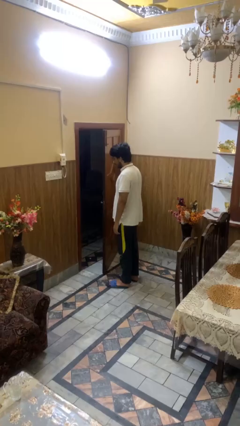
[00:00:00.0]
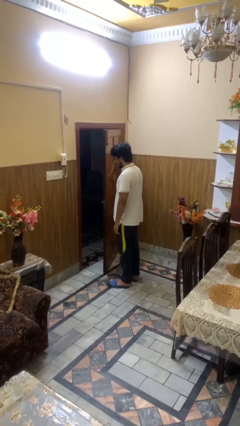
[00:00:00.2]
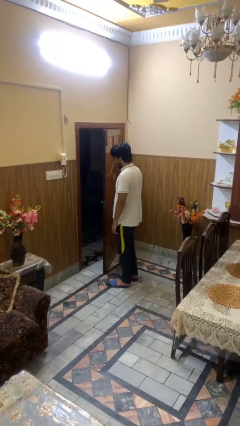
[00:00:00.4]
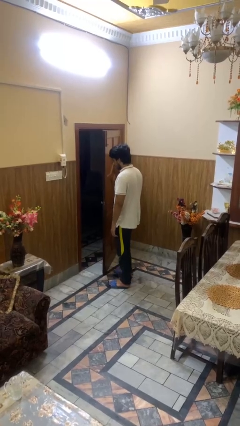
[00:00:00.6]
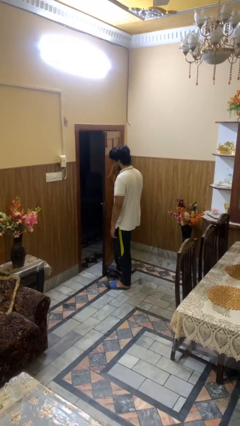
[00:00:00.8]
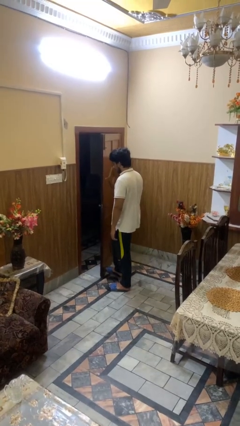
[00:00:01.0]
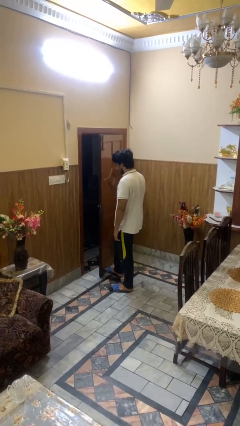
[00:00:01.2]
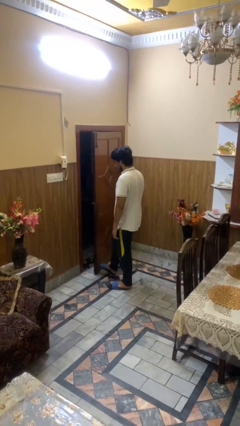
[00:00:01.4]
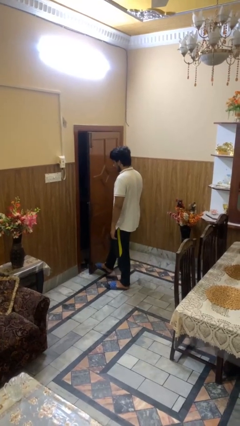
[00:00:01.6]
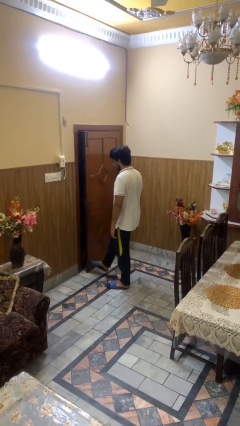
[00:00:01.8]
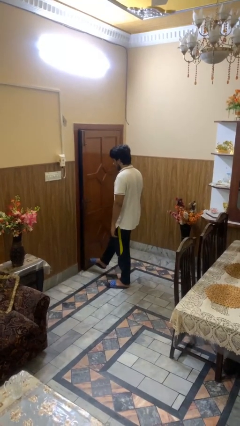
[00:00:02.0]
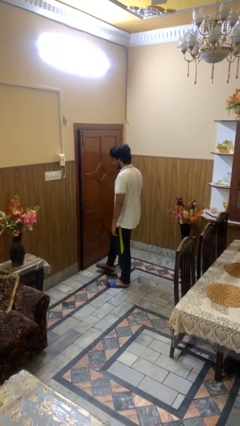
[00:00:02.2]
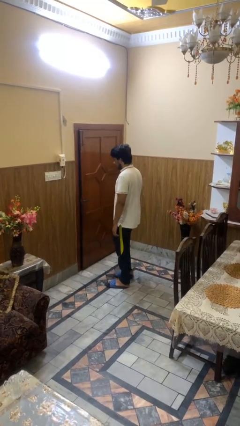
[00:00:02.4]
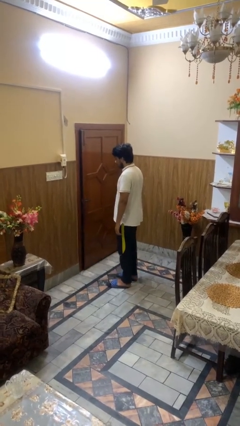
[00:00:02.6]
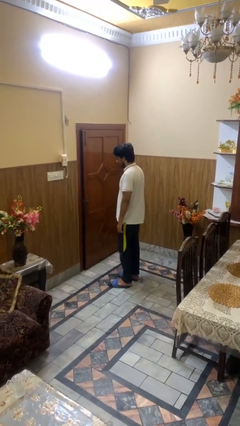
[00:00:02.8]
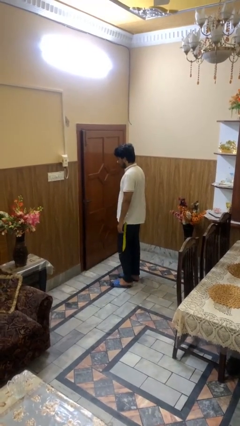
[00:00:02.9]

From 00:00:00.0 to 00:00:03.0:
person closes door with foot

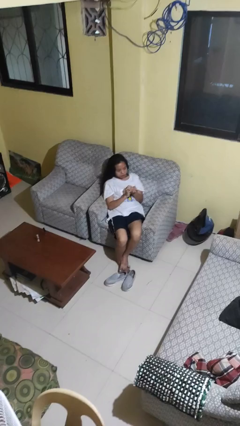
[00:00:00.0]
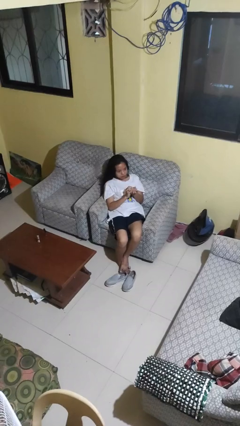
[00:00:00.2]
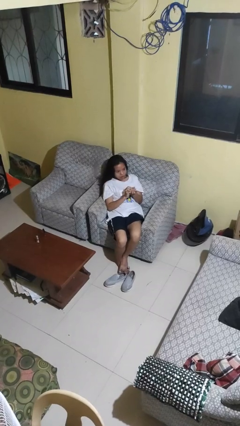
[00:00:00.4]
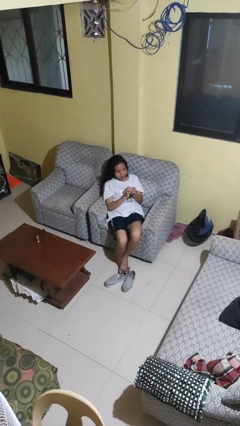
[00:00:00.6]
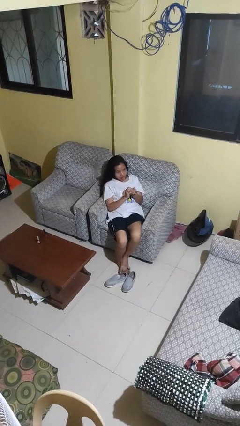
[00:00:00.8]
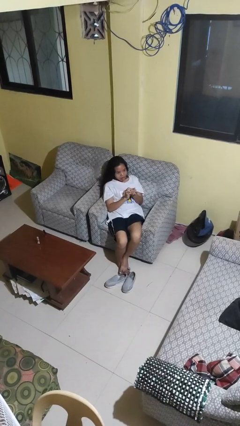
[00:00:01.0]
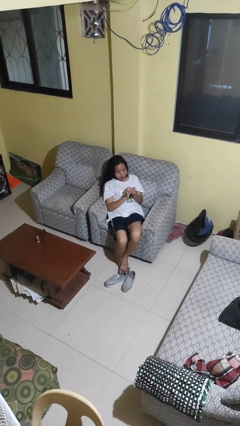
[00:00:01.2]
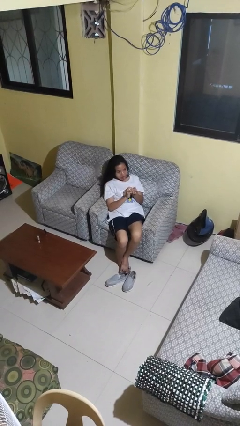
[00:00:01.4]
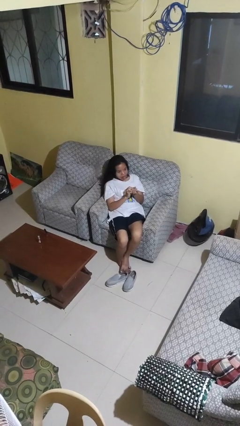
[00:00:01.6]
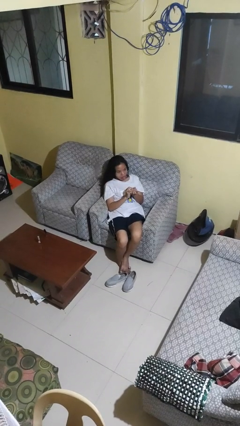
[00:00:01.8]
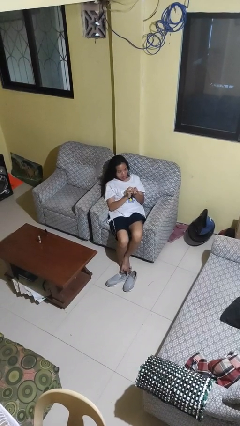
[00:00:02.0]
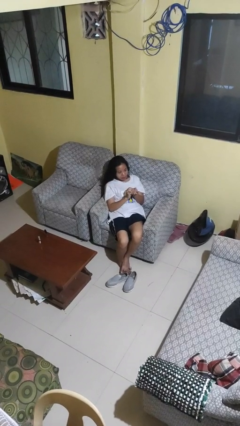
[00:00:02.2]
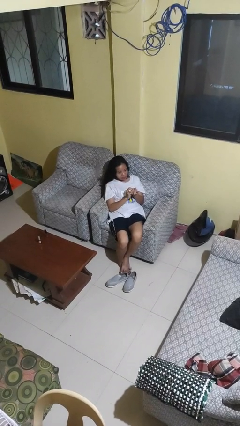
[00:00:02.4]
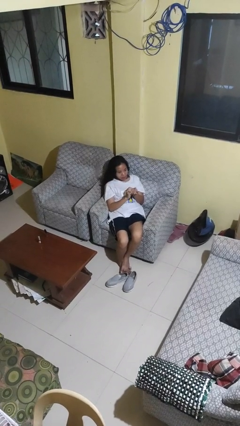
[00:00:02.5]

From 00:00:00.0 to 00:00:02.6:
person sticks out tongue

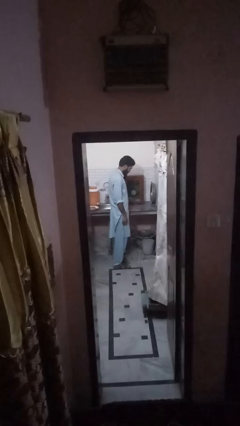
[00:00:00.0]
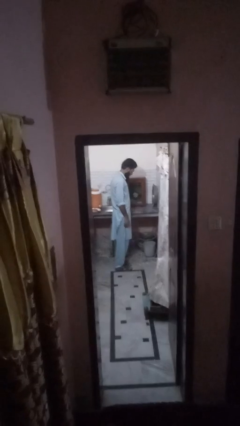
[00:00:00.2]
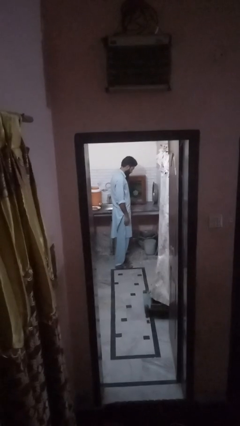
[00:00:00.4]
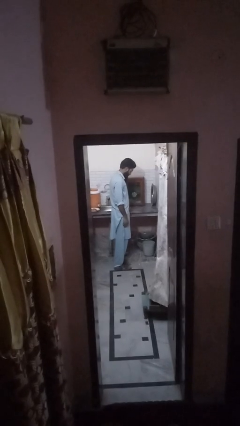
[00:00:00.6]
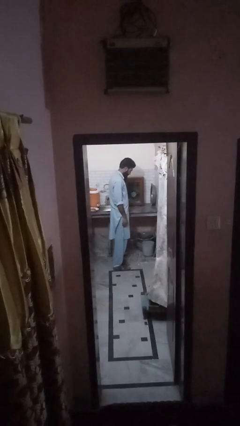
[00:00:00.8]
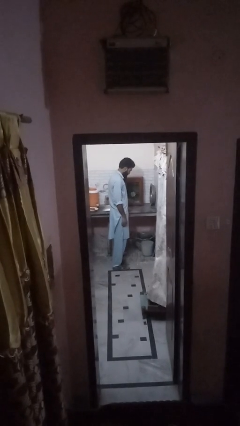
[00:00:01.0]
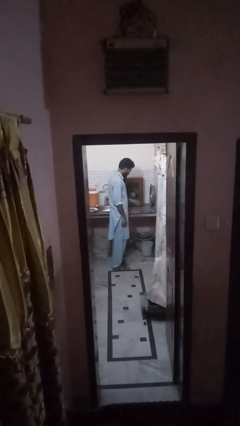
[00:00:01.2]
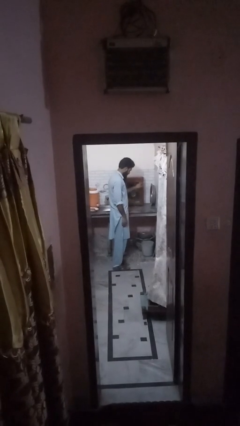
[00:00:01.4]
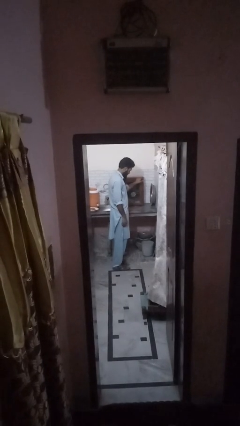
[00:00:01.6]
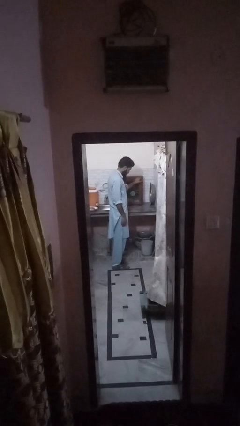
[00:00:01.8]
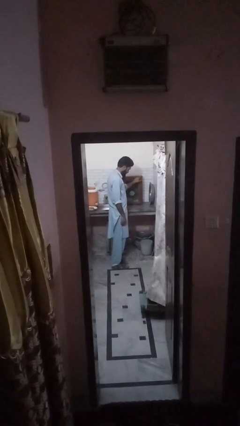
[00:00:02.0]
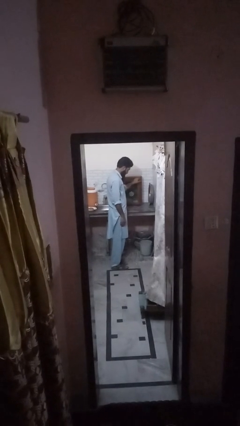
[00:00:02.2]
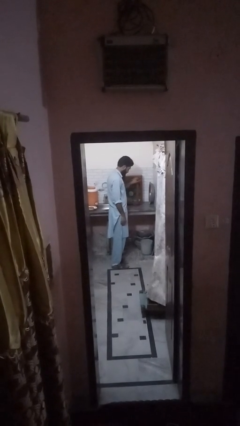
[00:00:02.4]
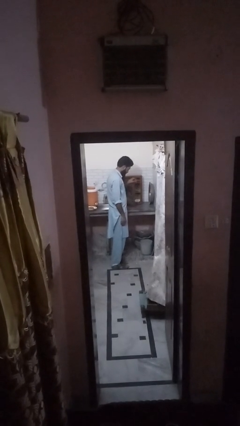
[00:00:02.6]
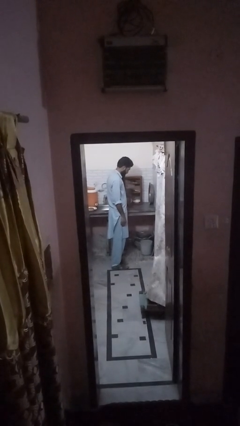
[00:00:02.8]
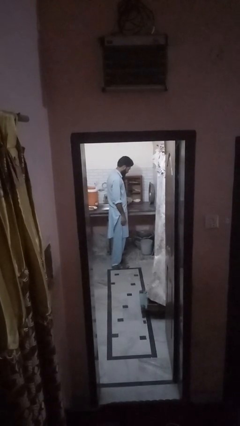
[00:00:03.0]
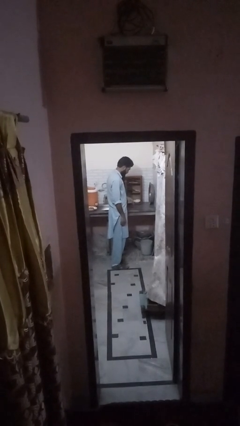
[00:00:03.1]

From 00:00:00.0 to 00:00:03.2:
person opens cabinet

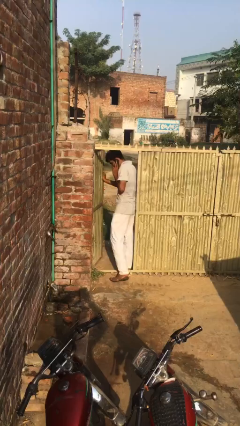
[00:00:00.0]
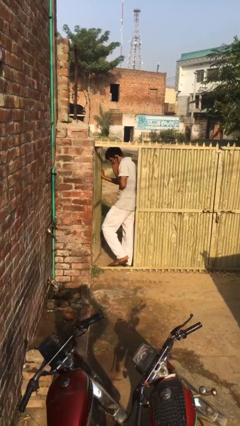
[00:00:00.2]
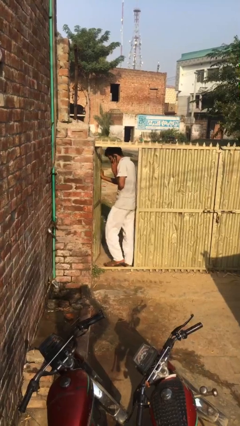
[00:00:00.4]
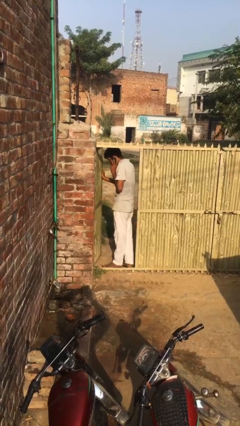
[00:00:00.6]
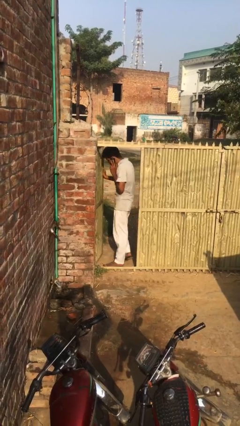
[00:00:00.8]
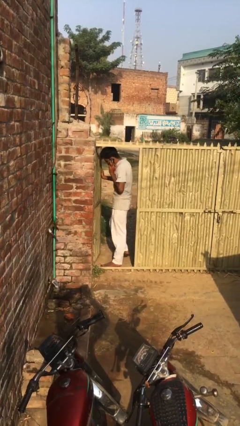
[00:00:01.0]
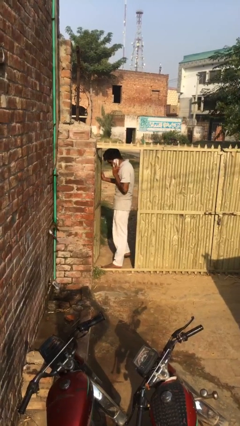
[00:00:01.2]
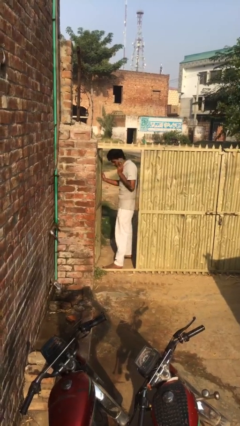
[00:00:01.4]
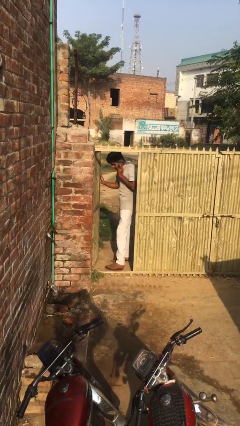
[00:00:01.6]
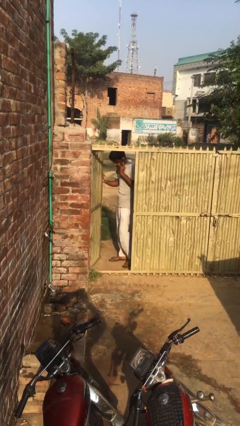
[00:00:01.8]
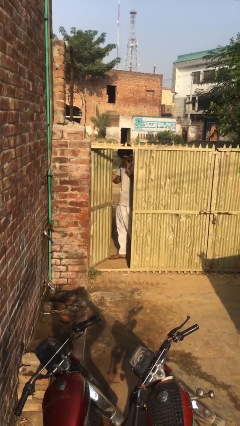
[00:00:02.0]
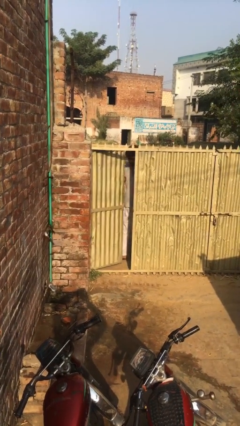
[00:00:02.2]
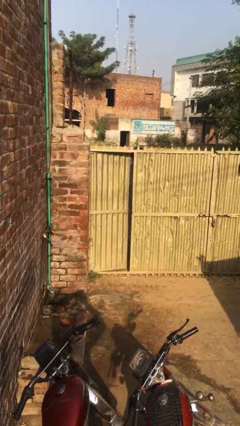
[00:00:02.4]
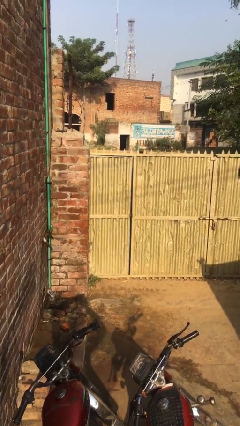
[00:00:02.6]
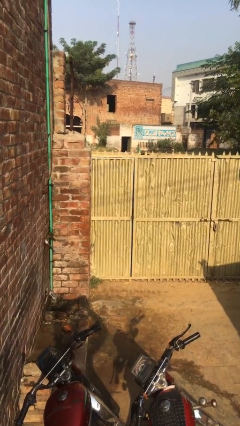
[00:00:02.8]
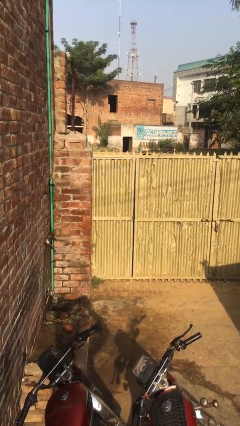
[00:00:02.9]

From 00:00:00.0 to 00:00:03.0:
person closes facility door

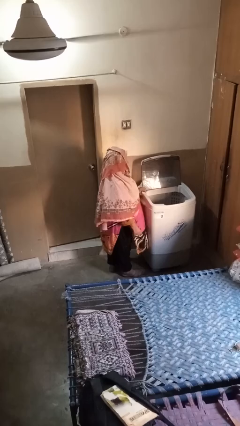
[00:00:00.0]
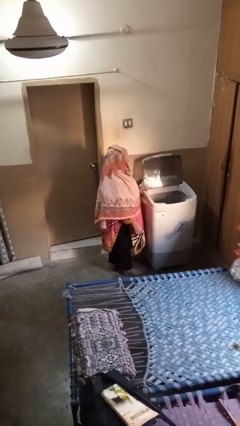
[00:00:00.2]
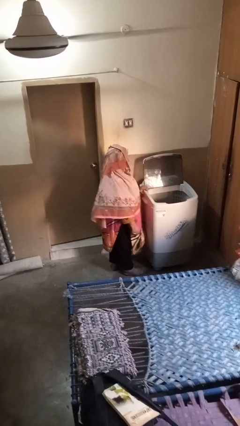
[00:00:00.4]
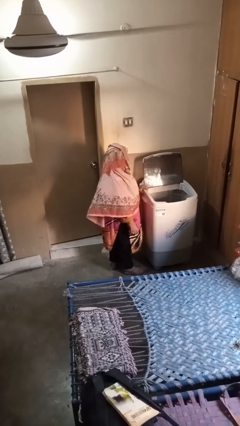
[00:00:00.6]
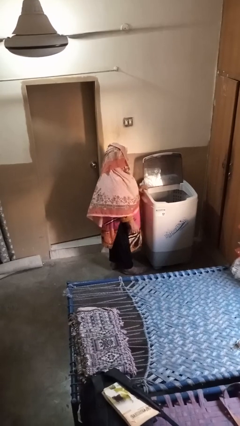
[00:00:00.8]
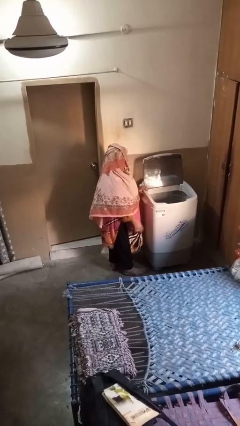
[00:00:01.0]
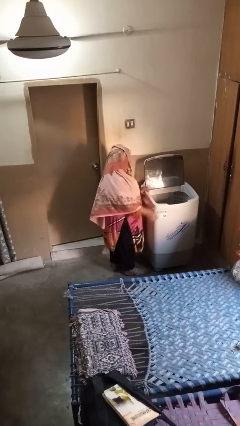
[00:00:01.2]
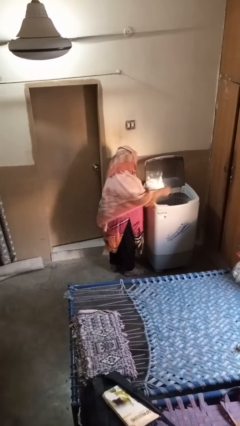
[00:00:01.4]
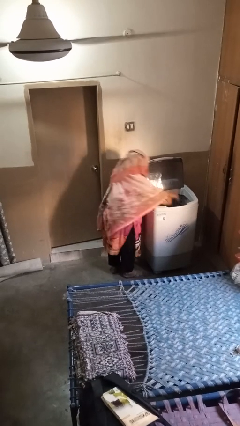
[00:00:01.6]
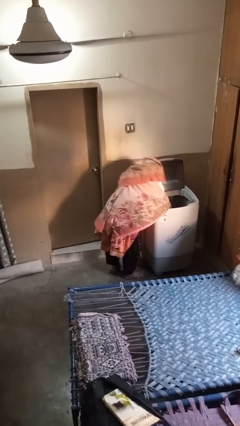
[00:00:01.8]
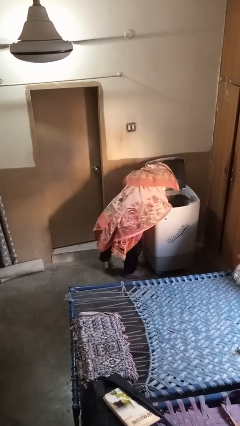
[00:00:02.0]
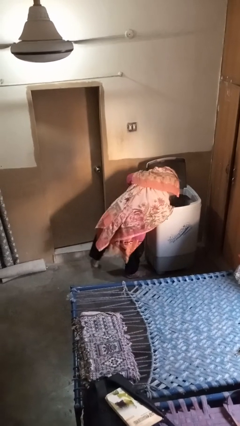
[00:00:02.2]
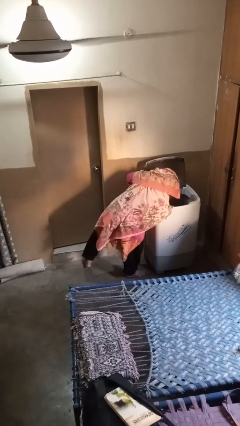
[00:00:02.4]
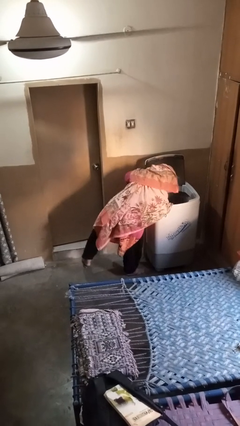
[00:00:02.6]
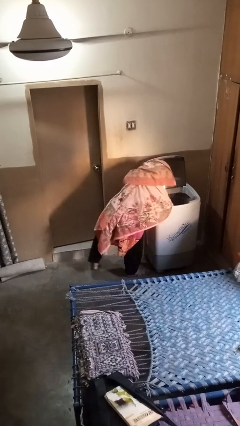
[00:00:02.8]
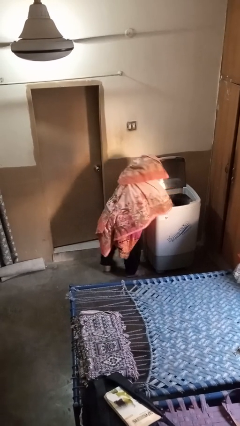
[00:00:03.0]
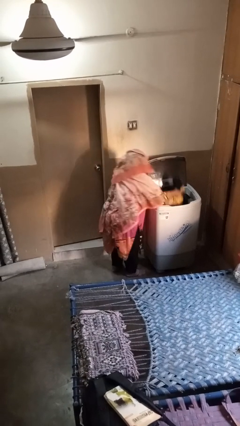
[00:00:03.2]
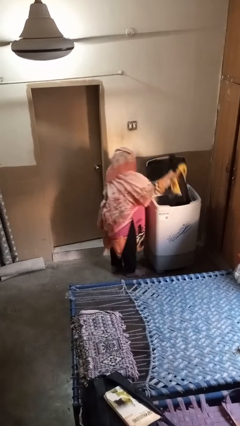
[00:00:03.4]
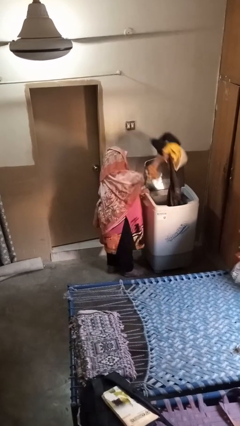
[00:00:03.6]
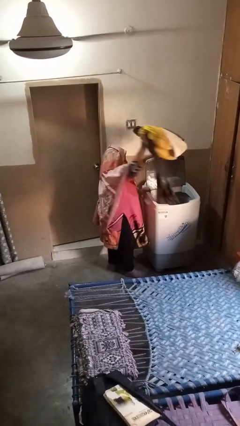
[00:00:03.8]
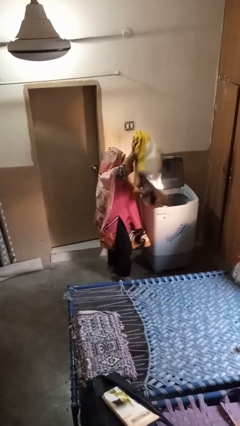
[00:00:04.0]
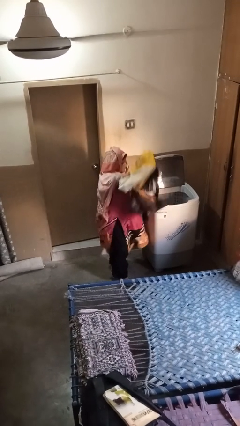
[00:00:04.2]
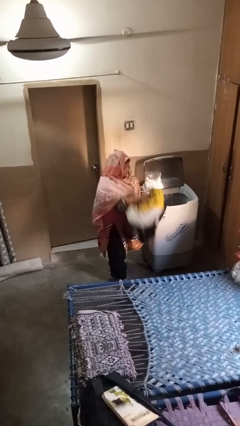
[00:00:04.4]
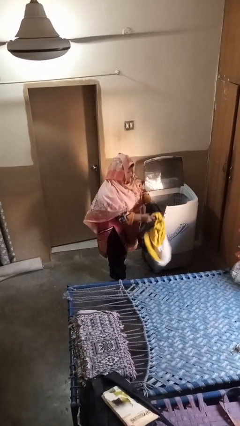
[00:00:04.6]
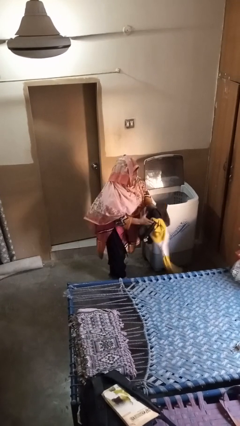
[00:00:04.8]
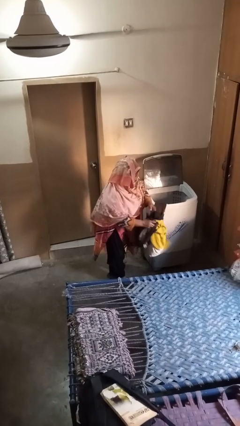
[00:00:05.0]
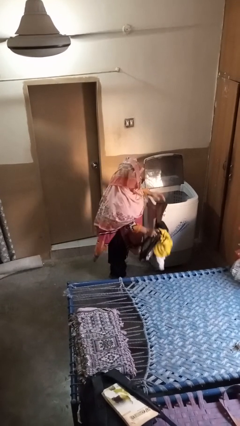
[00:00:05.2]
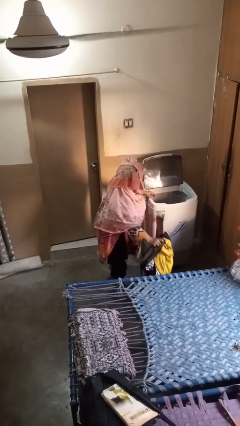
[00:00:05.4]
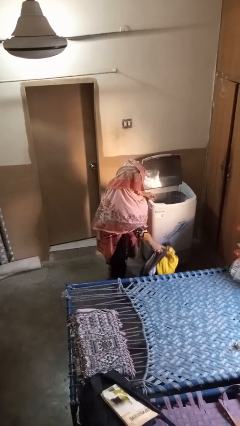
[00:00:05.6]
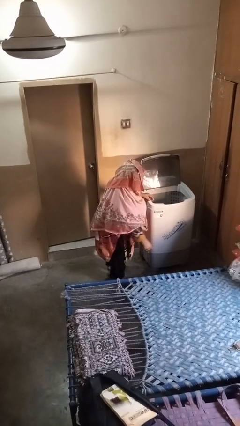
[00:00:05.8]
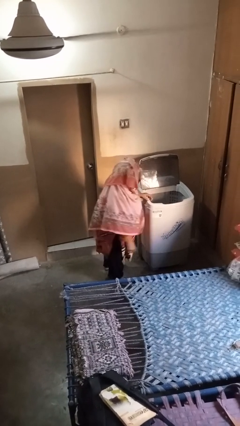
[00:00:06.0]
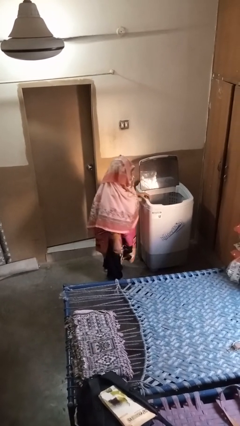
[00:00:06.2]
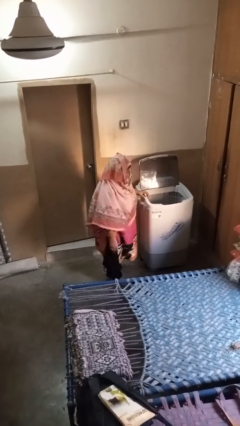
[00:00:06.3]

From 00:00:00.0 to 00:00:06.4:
person unloads clotheswasher
